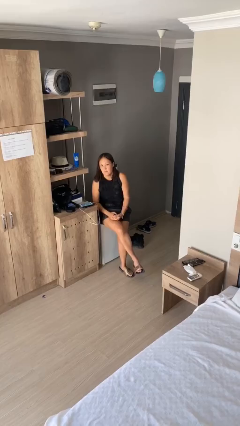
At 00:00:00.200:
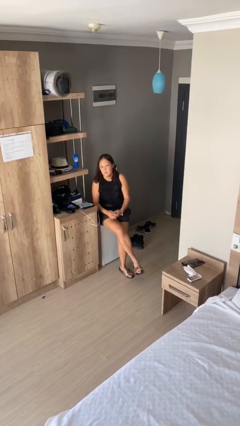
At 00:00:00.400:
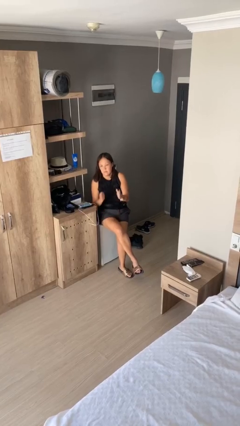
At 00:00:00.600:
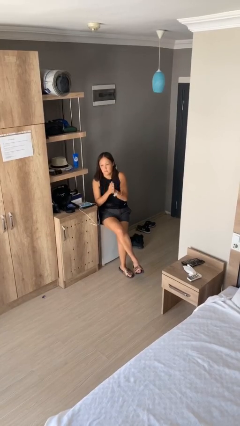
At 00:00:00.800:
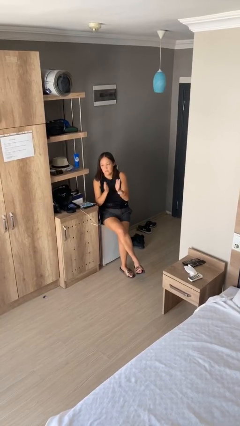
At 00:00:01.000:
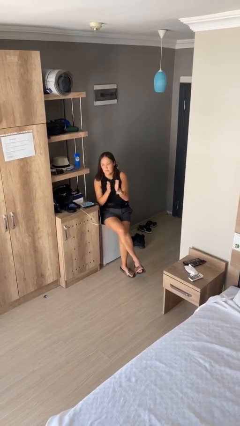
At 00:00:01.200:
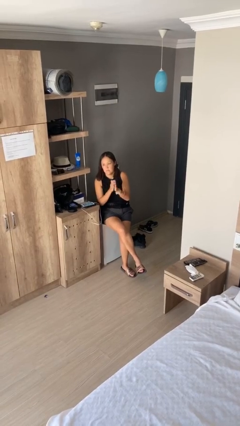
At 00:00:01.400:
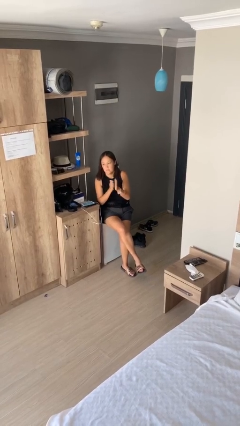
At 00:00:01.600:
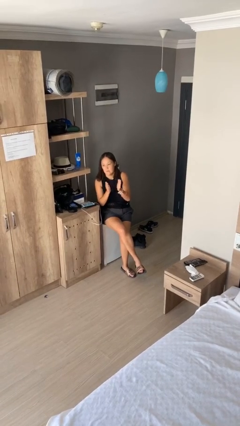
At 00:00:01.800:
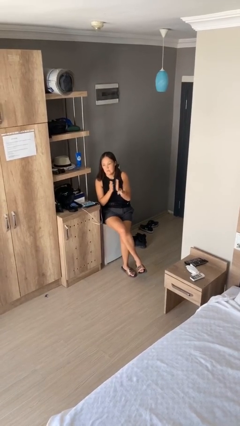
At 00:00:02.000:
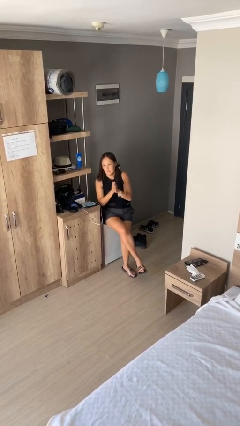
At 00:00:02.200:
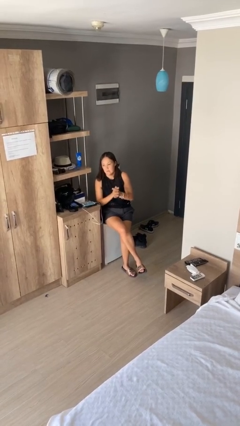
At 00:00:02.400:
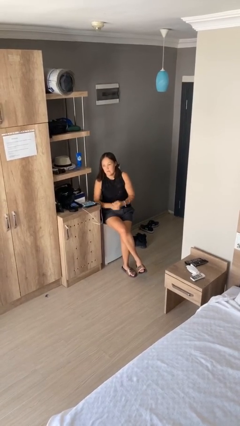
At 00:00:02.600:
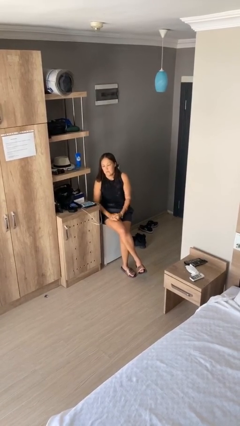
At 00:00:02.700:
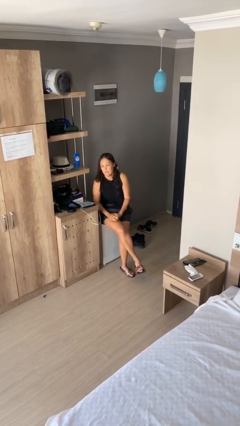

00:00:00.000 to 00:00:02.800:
person claps hands

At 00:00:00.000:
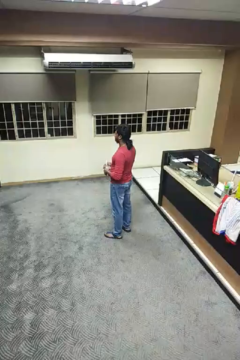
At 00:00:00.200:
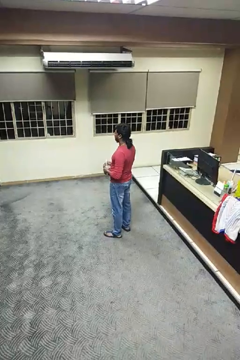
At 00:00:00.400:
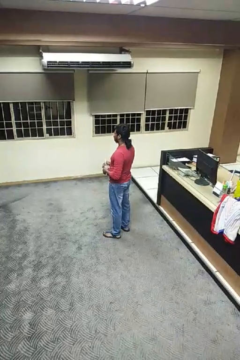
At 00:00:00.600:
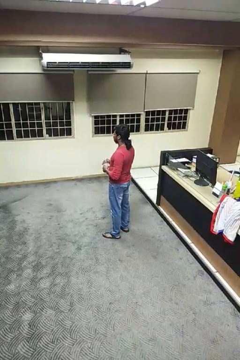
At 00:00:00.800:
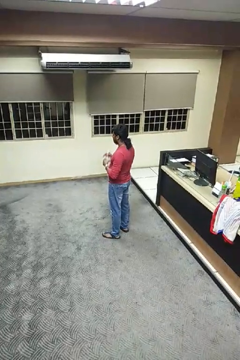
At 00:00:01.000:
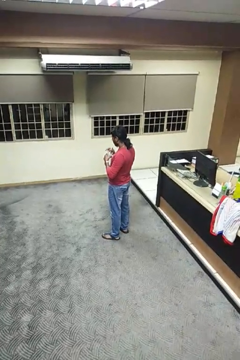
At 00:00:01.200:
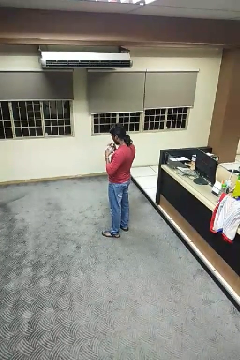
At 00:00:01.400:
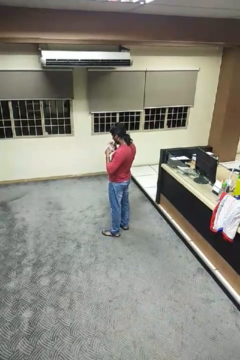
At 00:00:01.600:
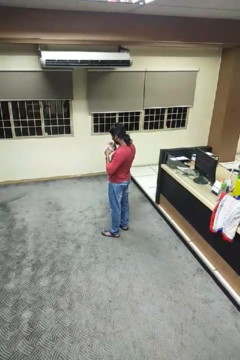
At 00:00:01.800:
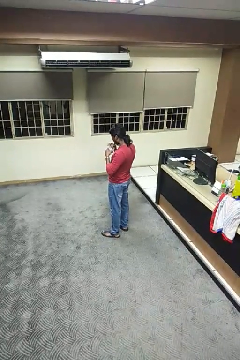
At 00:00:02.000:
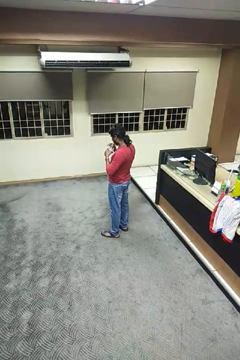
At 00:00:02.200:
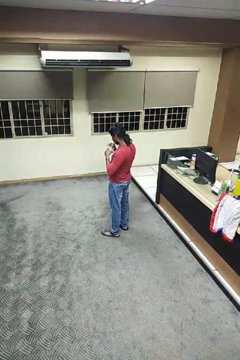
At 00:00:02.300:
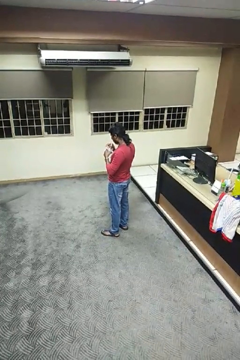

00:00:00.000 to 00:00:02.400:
person drinks from straw

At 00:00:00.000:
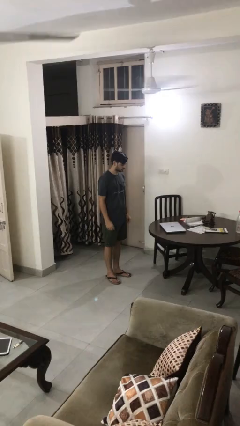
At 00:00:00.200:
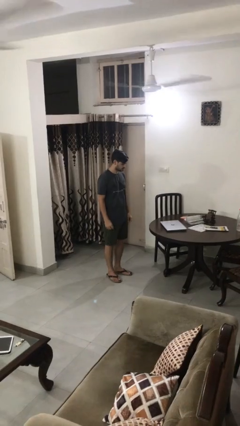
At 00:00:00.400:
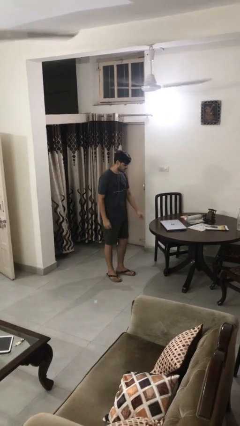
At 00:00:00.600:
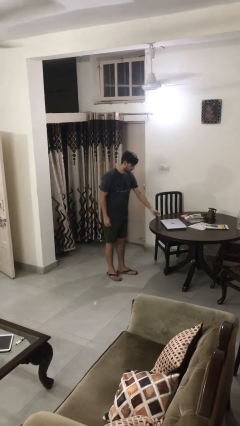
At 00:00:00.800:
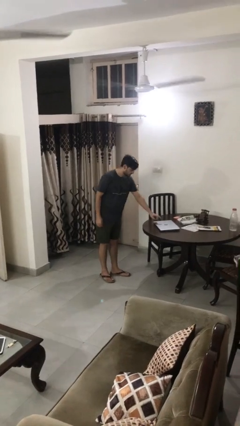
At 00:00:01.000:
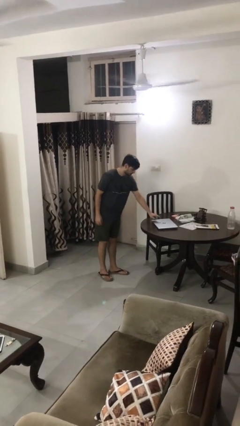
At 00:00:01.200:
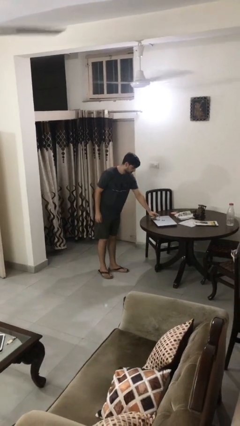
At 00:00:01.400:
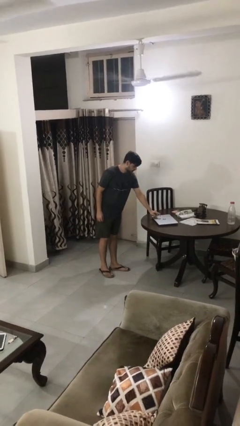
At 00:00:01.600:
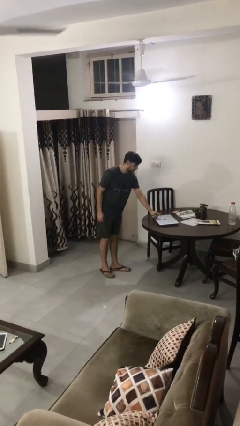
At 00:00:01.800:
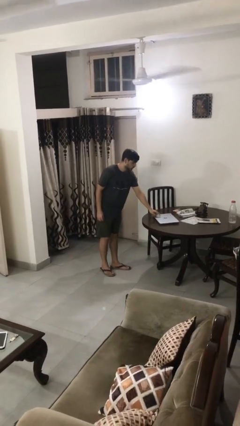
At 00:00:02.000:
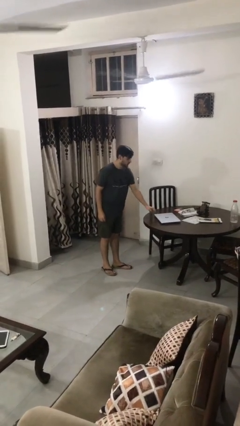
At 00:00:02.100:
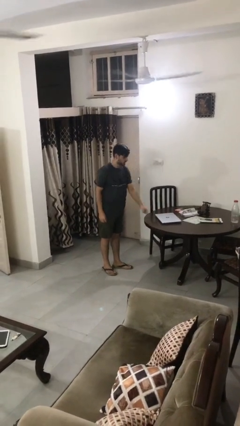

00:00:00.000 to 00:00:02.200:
person taps object with finger

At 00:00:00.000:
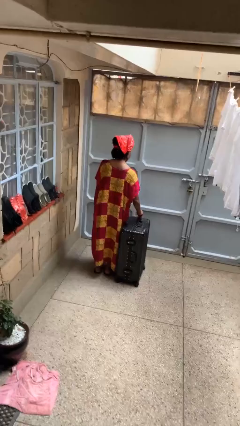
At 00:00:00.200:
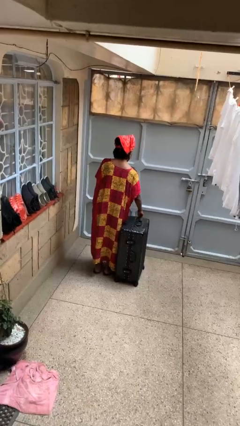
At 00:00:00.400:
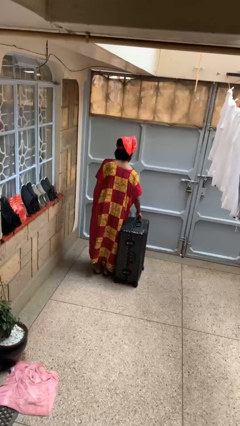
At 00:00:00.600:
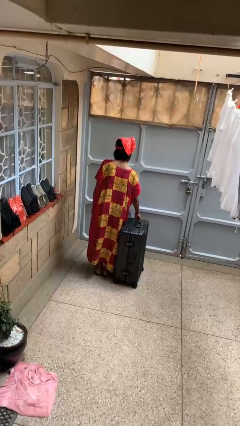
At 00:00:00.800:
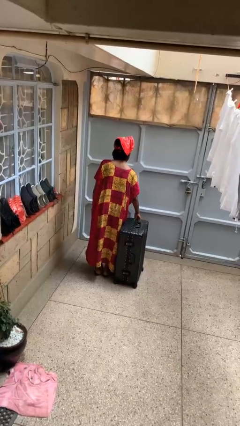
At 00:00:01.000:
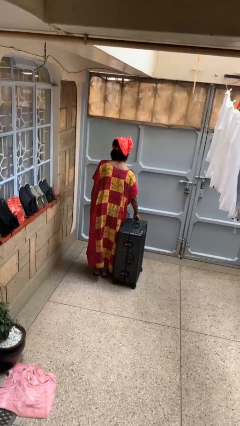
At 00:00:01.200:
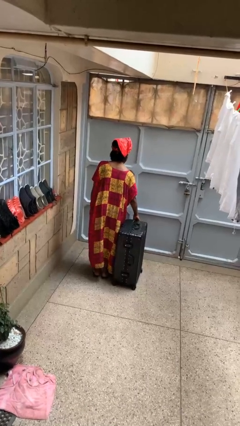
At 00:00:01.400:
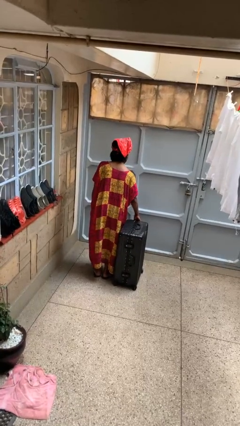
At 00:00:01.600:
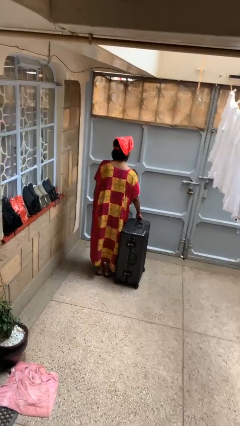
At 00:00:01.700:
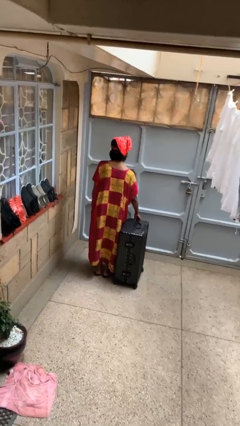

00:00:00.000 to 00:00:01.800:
person closes suitcase

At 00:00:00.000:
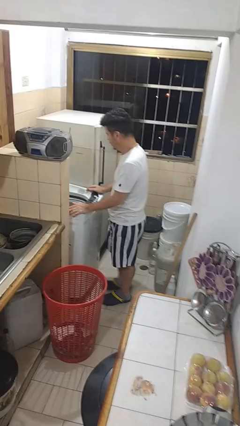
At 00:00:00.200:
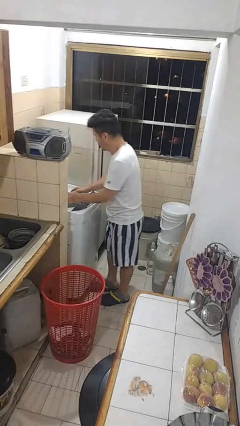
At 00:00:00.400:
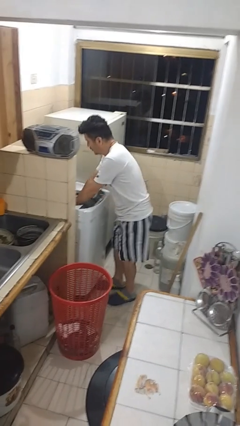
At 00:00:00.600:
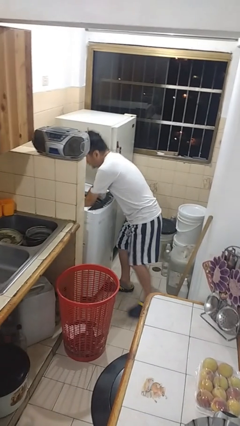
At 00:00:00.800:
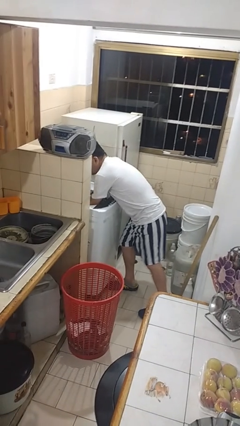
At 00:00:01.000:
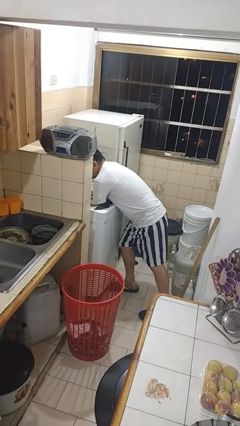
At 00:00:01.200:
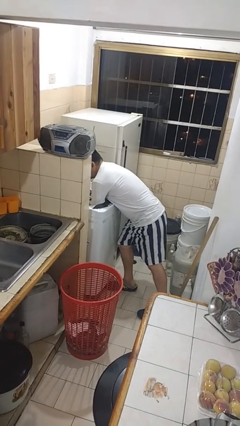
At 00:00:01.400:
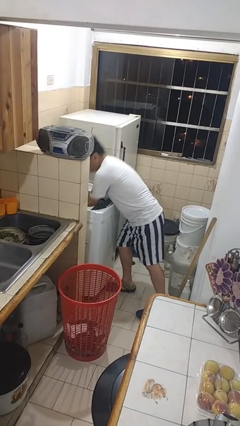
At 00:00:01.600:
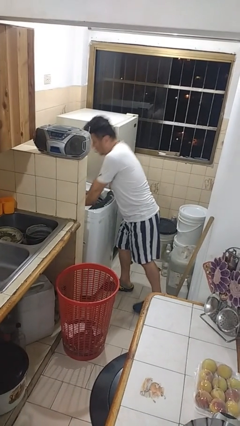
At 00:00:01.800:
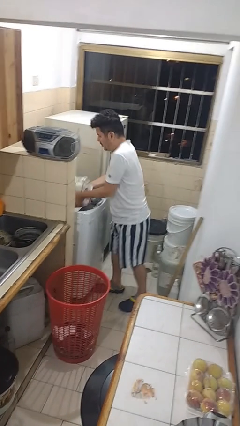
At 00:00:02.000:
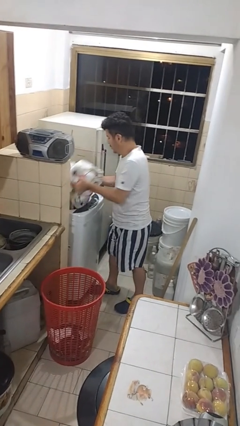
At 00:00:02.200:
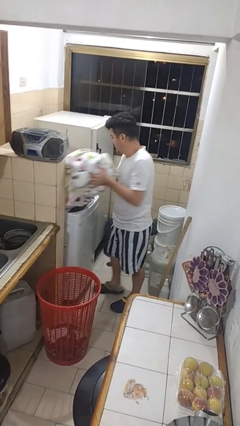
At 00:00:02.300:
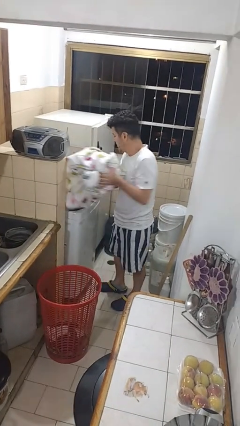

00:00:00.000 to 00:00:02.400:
person unloads clotheswasher

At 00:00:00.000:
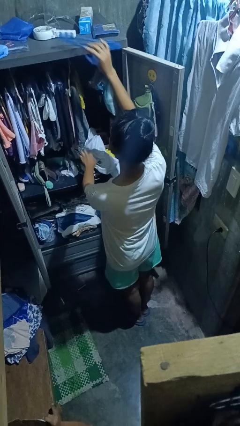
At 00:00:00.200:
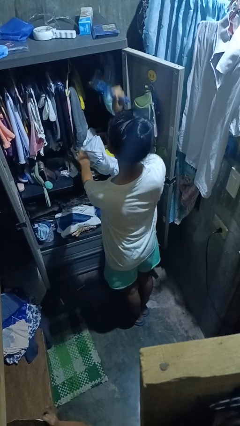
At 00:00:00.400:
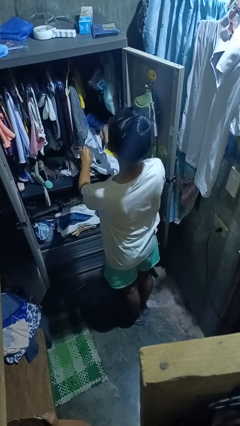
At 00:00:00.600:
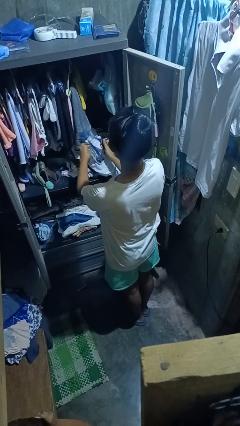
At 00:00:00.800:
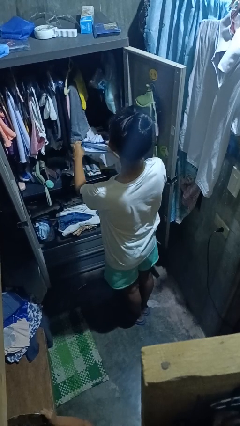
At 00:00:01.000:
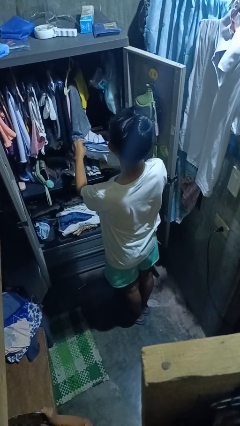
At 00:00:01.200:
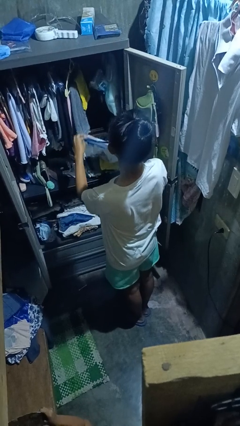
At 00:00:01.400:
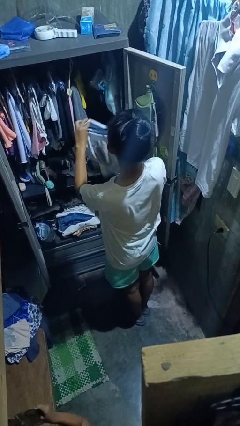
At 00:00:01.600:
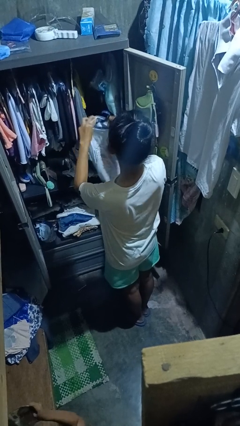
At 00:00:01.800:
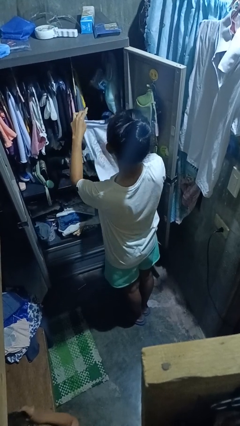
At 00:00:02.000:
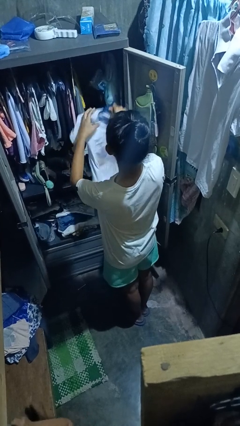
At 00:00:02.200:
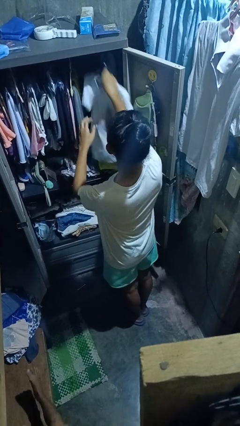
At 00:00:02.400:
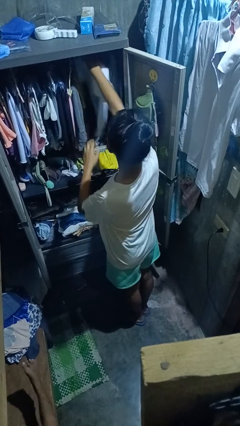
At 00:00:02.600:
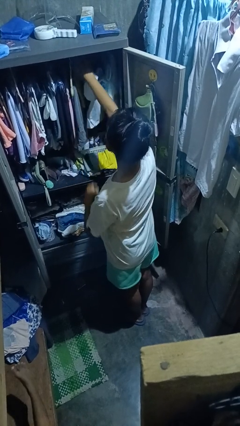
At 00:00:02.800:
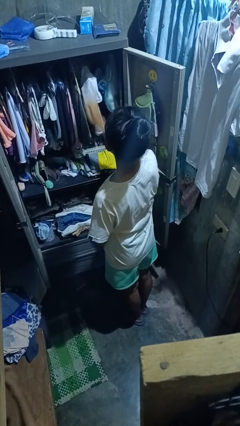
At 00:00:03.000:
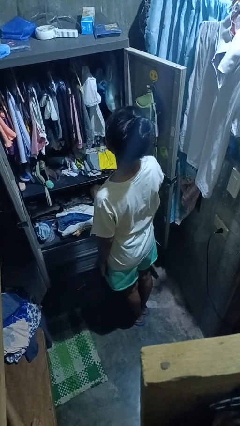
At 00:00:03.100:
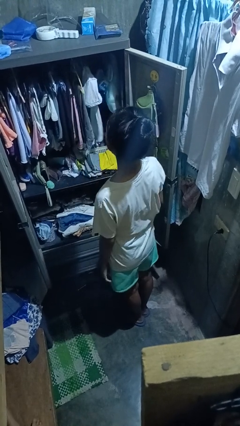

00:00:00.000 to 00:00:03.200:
person puts clothes into closet

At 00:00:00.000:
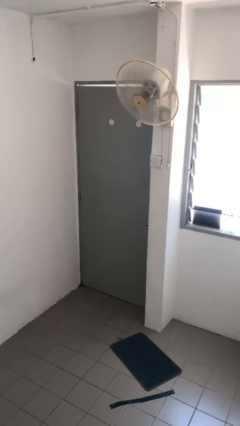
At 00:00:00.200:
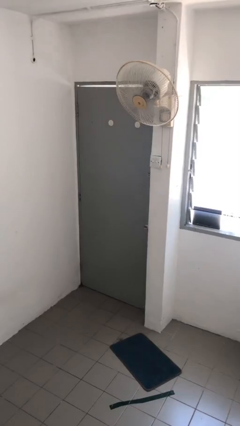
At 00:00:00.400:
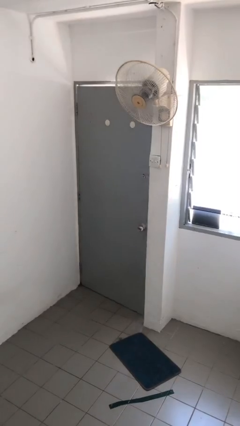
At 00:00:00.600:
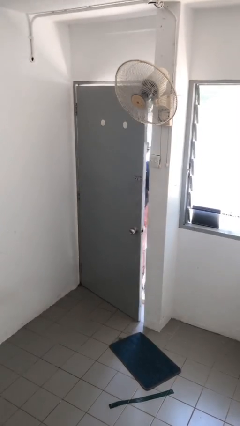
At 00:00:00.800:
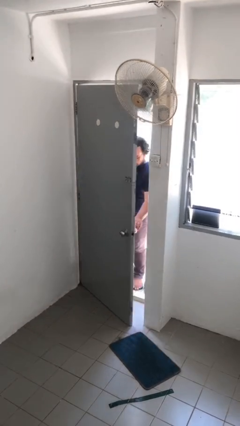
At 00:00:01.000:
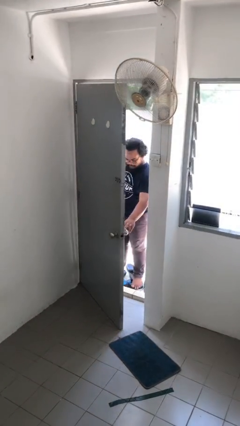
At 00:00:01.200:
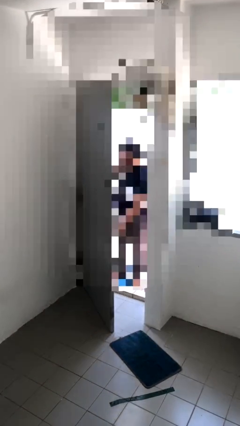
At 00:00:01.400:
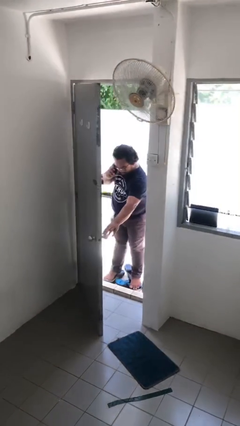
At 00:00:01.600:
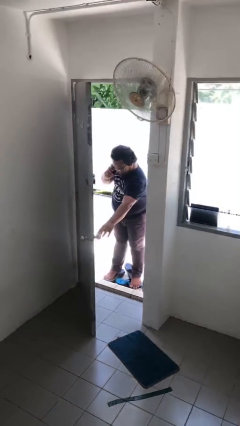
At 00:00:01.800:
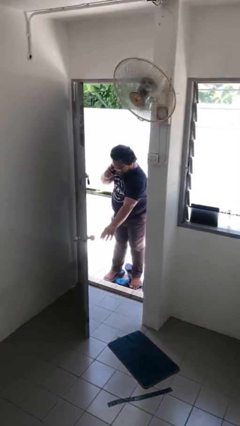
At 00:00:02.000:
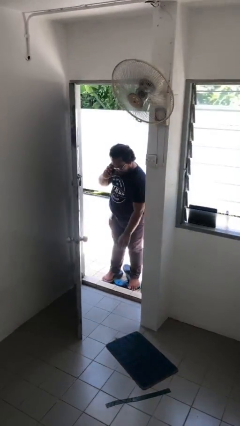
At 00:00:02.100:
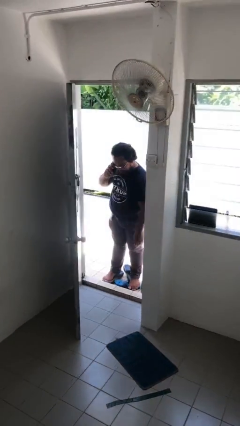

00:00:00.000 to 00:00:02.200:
person opens facility door
